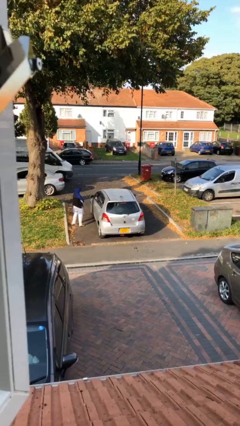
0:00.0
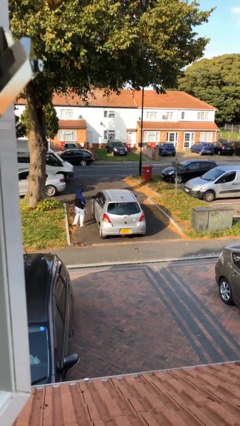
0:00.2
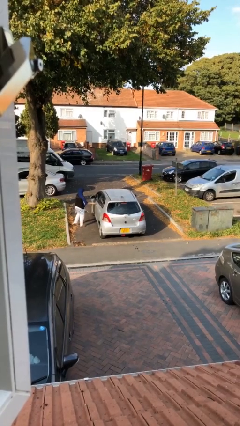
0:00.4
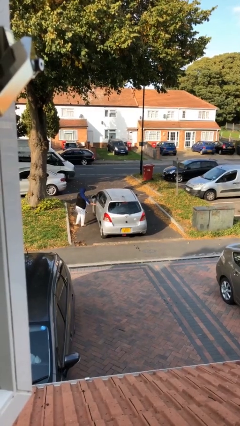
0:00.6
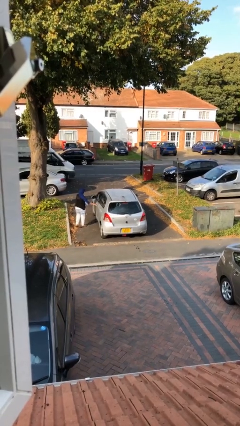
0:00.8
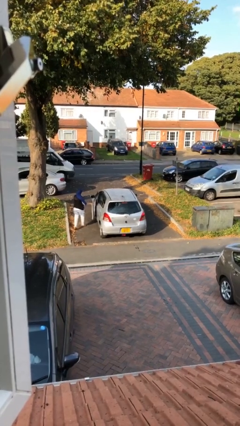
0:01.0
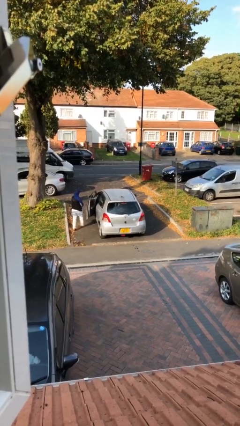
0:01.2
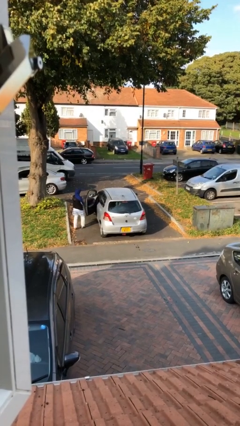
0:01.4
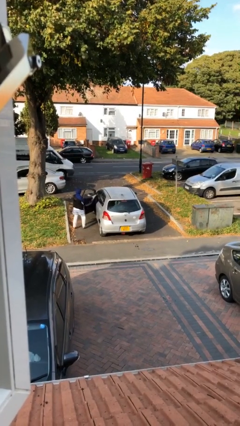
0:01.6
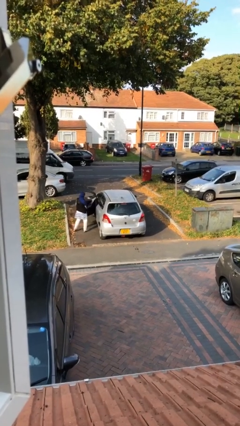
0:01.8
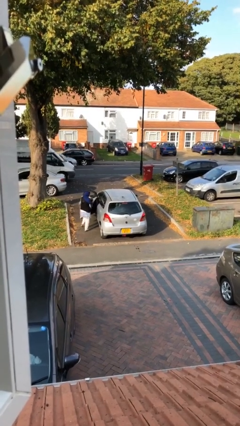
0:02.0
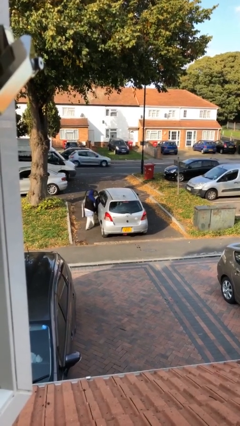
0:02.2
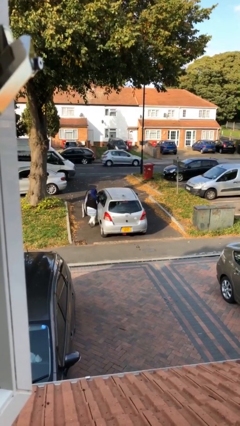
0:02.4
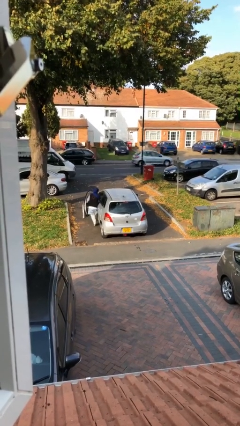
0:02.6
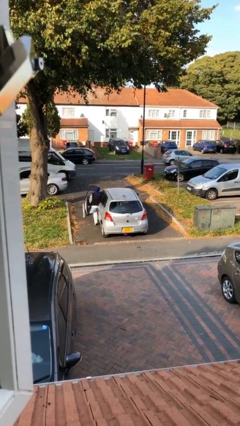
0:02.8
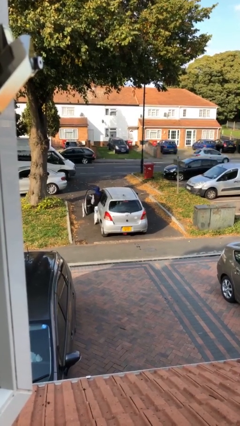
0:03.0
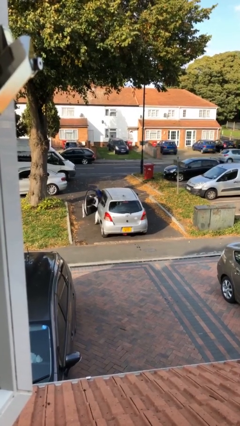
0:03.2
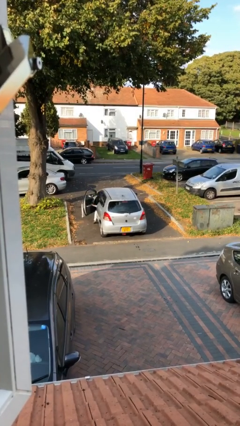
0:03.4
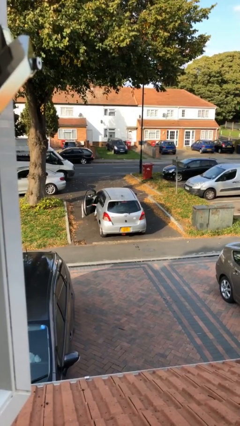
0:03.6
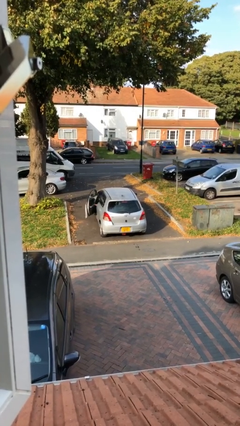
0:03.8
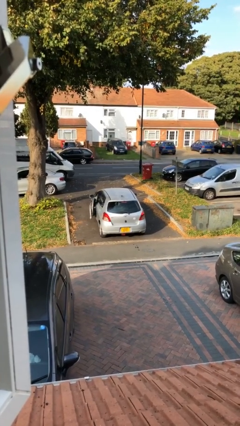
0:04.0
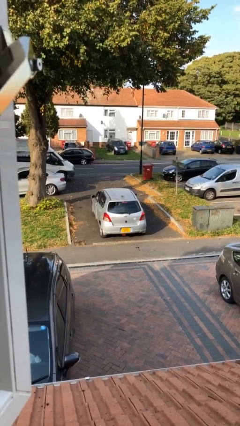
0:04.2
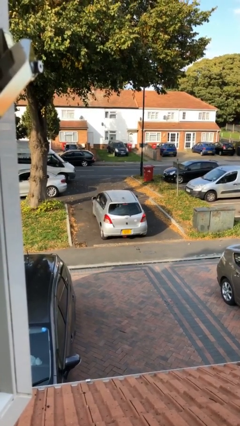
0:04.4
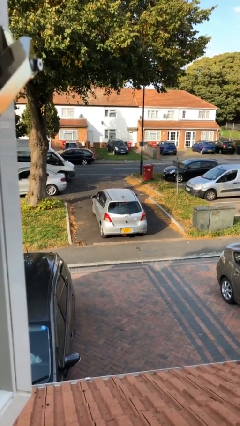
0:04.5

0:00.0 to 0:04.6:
car picks up person

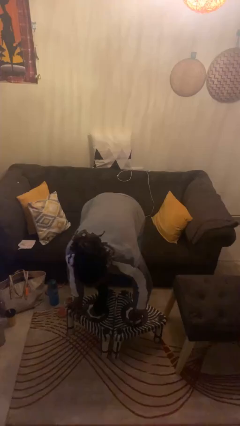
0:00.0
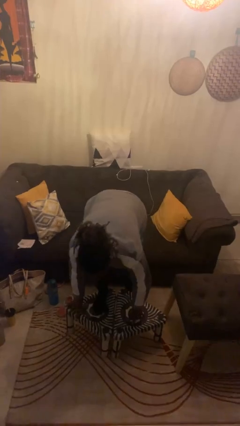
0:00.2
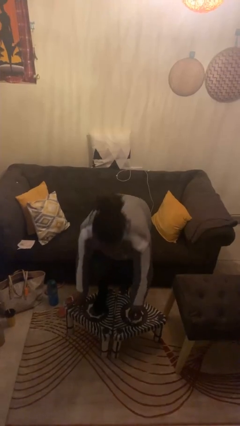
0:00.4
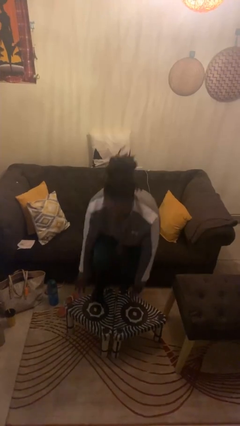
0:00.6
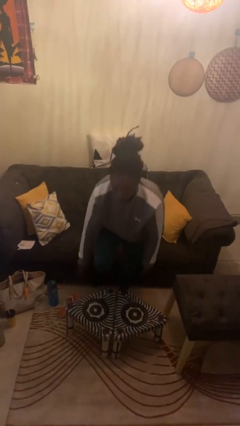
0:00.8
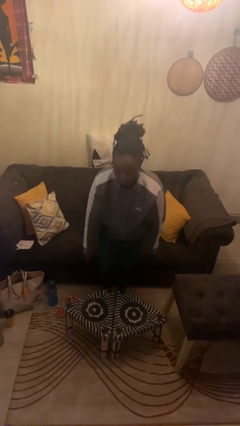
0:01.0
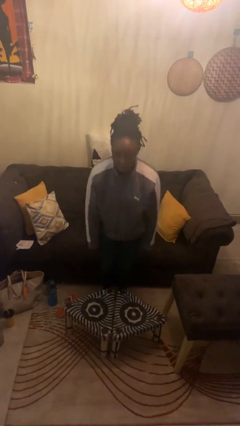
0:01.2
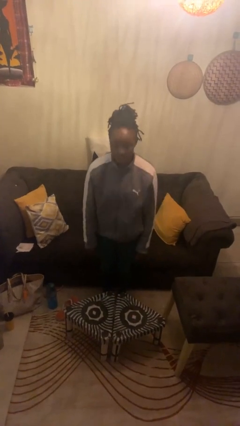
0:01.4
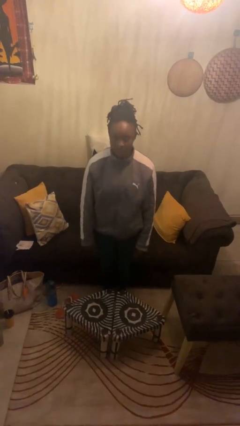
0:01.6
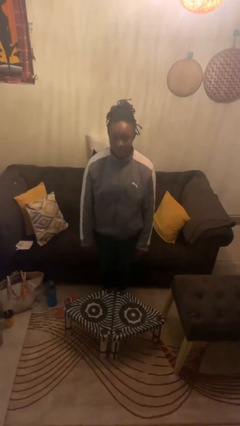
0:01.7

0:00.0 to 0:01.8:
person climbs off table

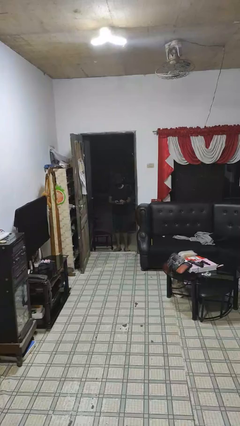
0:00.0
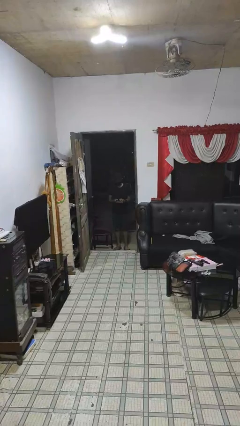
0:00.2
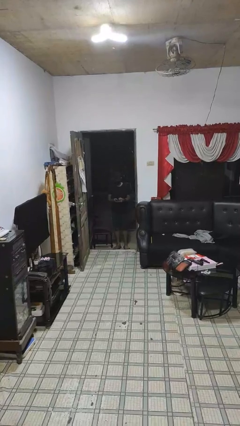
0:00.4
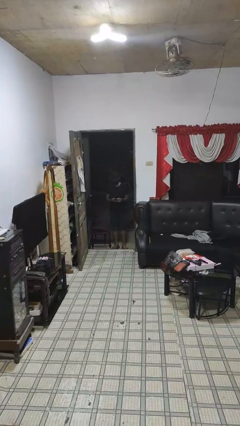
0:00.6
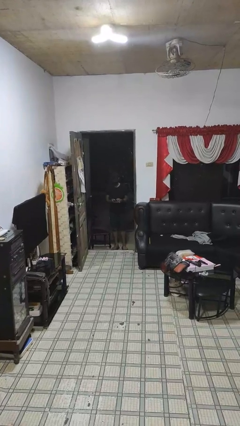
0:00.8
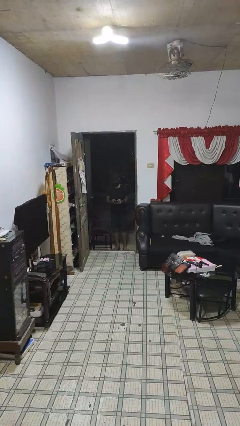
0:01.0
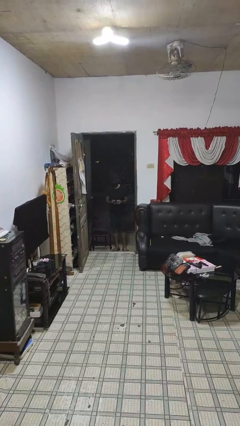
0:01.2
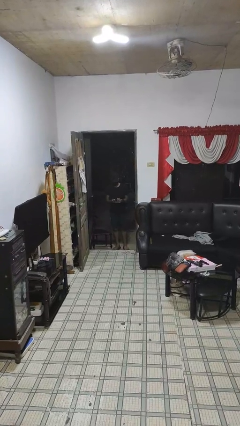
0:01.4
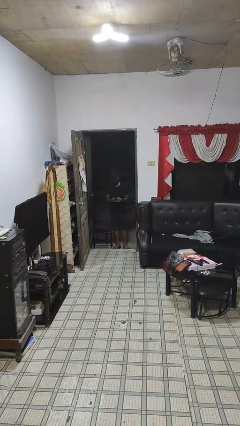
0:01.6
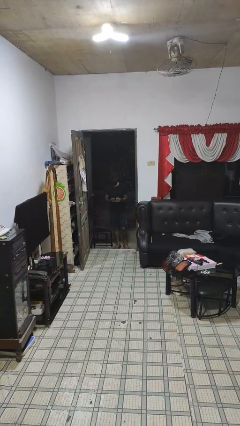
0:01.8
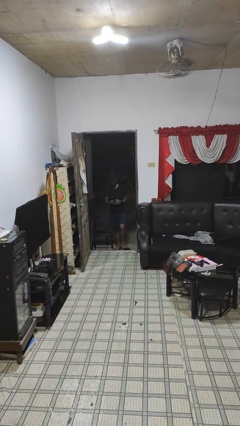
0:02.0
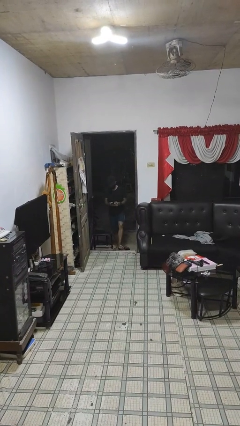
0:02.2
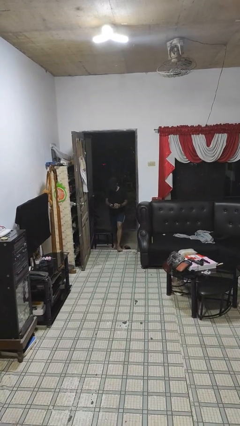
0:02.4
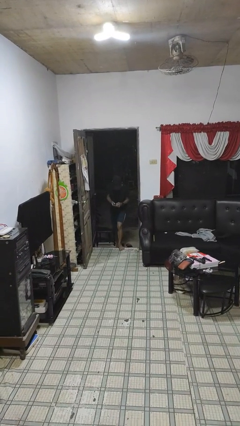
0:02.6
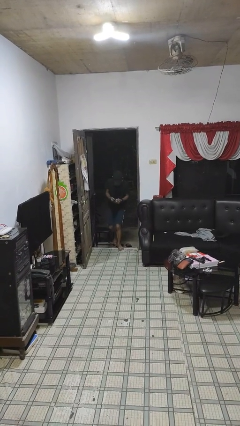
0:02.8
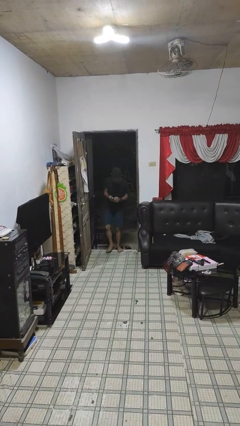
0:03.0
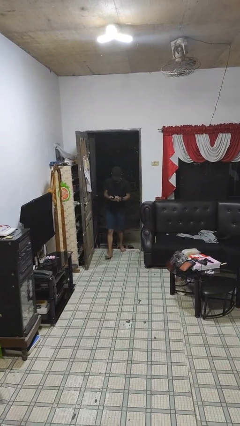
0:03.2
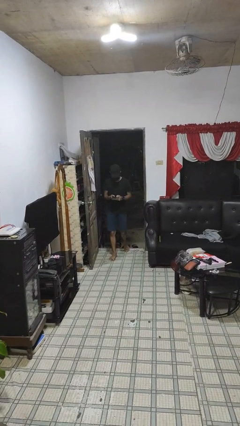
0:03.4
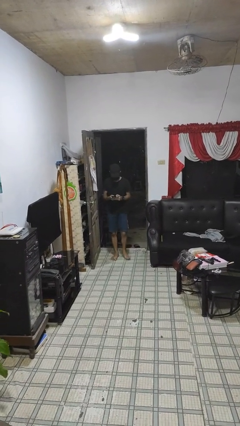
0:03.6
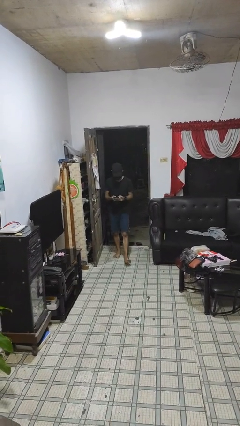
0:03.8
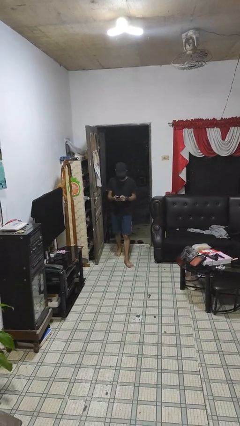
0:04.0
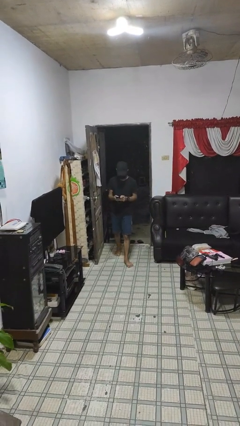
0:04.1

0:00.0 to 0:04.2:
person enters scene through structure

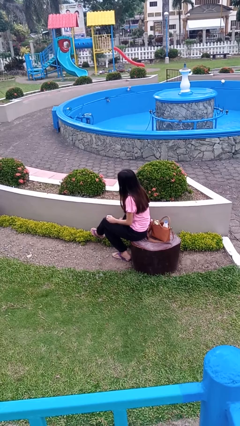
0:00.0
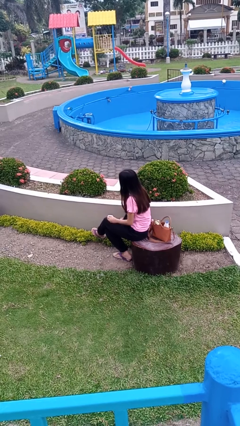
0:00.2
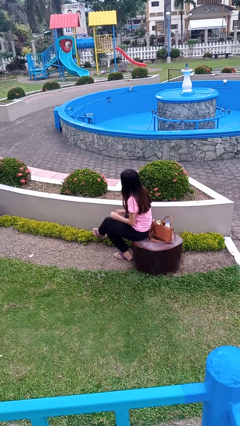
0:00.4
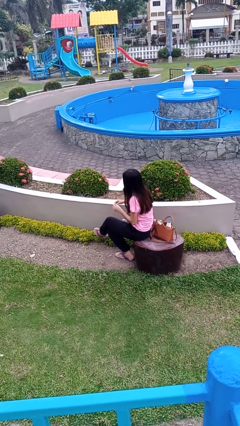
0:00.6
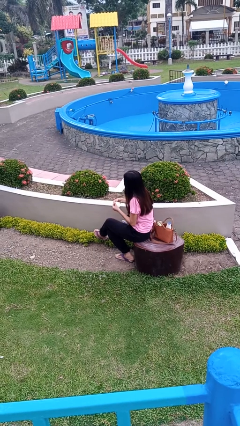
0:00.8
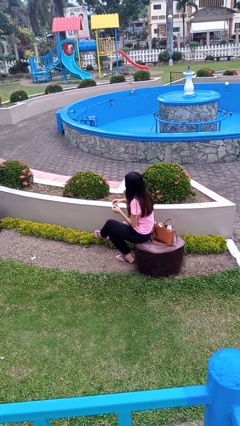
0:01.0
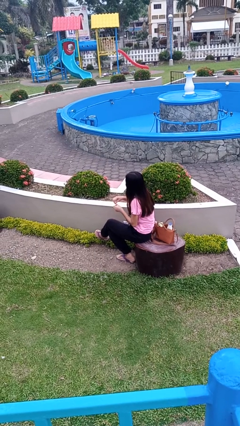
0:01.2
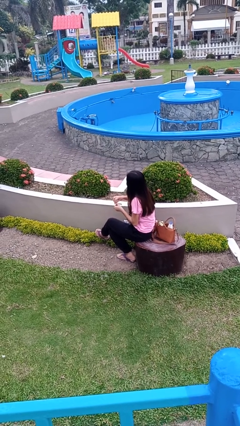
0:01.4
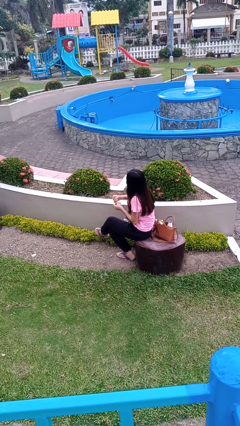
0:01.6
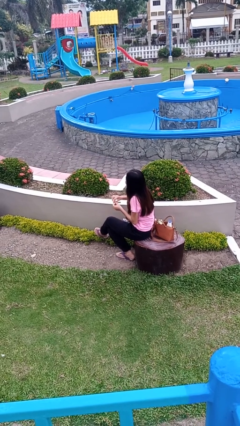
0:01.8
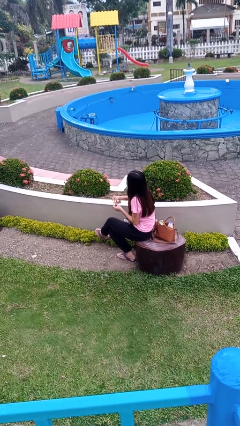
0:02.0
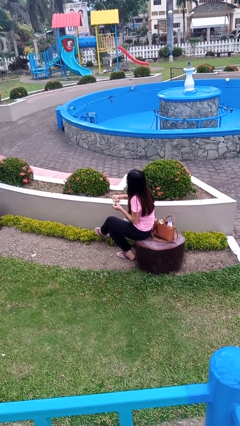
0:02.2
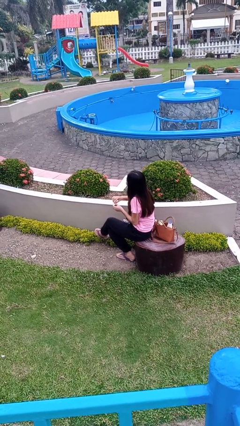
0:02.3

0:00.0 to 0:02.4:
person takes medicine pills

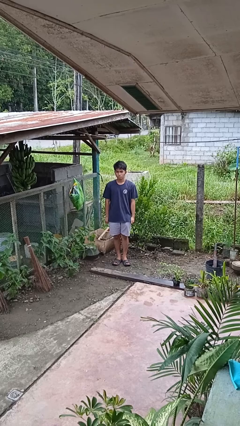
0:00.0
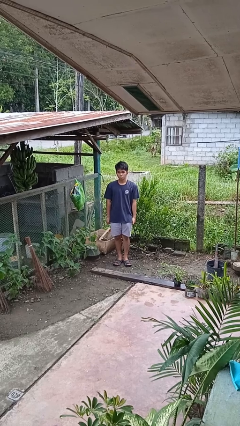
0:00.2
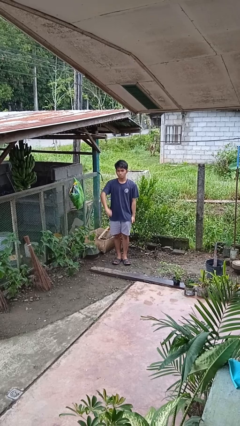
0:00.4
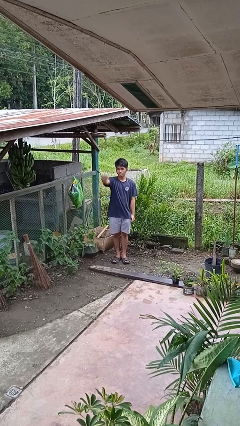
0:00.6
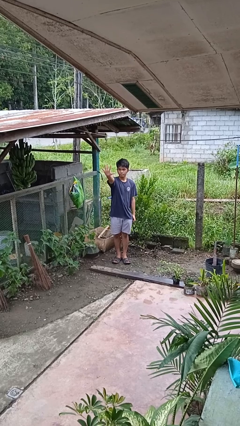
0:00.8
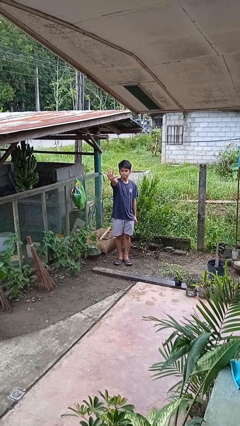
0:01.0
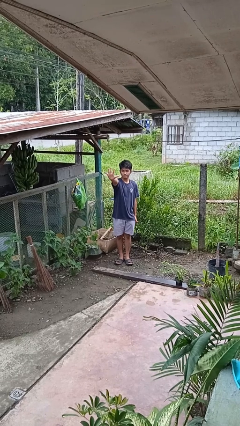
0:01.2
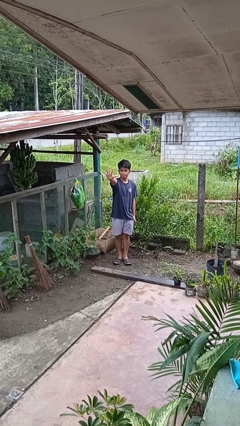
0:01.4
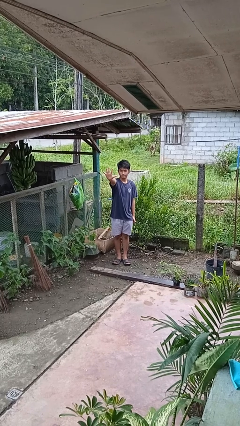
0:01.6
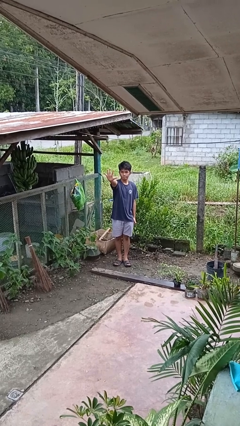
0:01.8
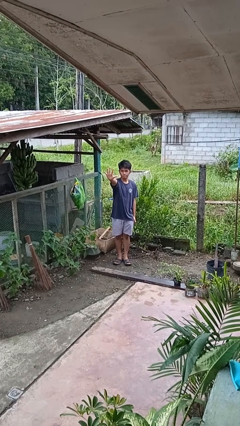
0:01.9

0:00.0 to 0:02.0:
person gestures number five

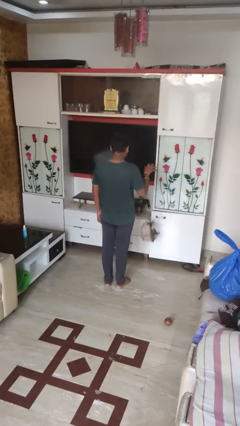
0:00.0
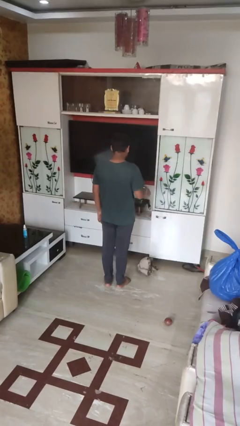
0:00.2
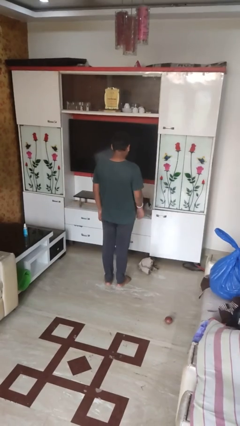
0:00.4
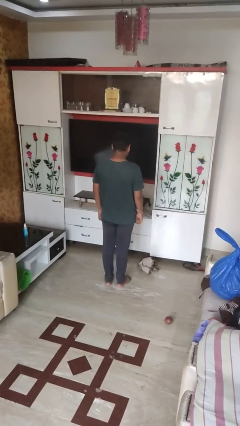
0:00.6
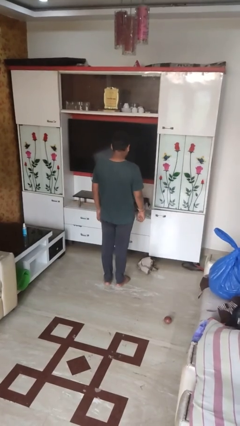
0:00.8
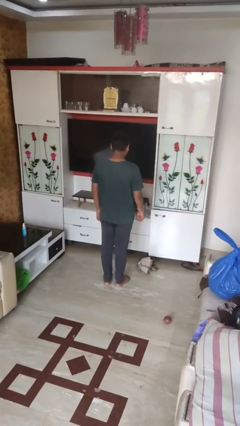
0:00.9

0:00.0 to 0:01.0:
person throws object to ground

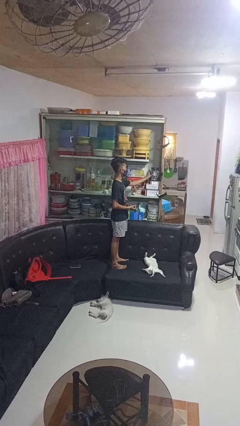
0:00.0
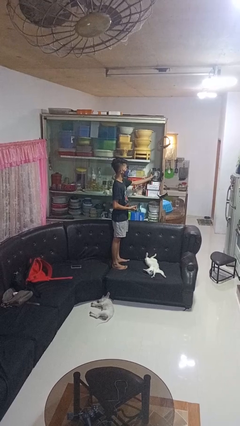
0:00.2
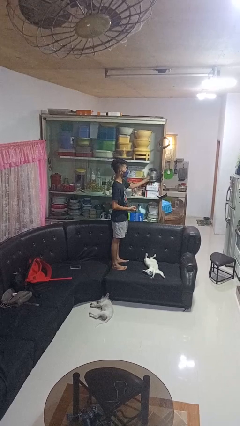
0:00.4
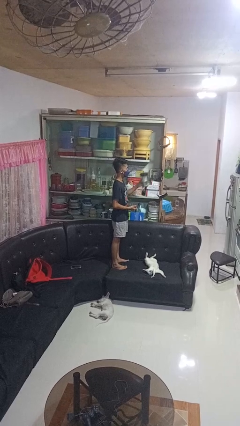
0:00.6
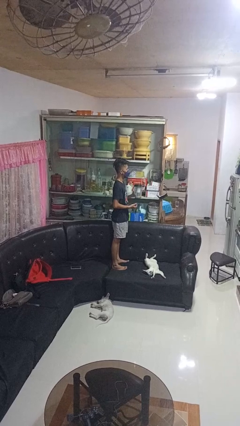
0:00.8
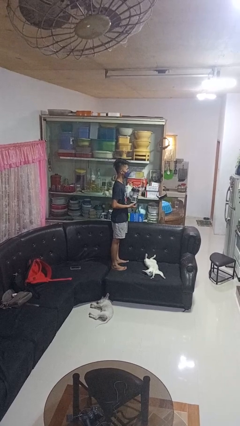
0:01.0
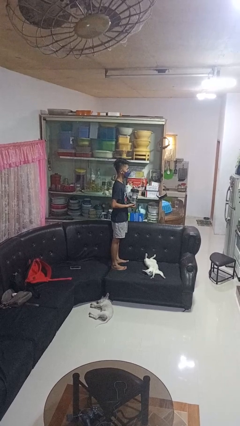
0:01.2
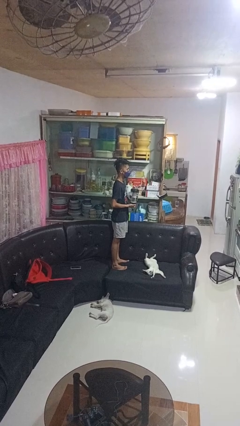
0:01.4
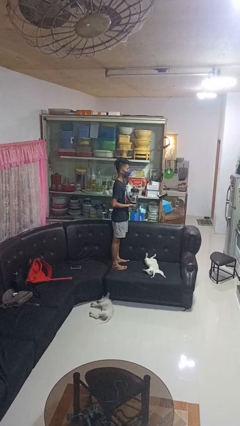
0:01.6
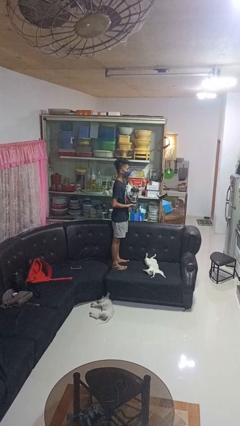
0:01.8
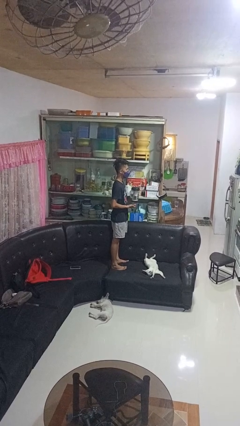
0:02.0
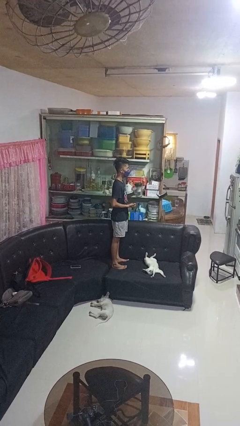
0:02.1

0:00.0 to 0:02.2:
person picks up object from cabinet
